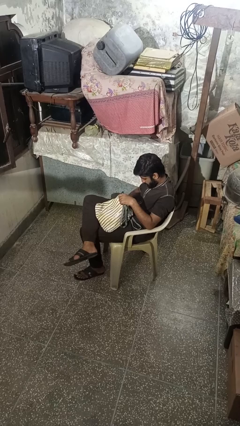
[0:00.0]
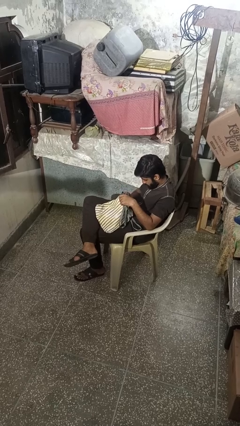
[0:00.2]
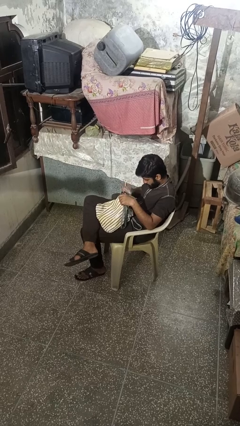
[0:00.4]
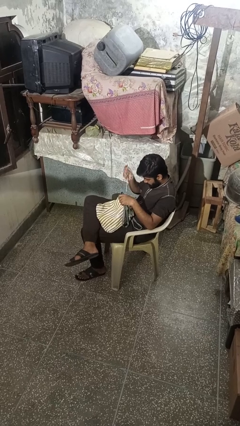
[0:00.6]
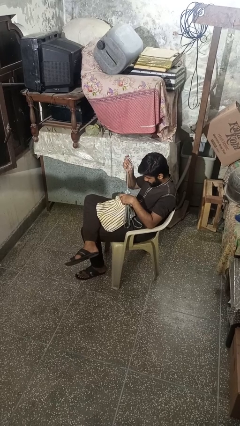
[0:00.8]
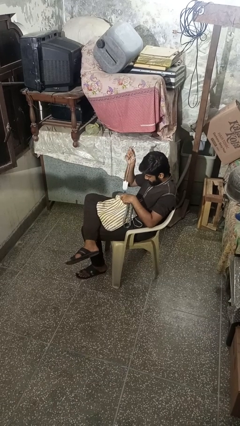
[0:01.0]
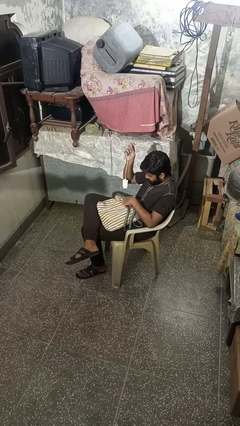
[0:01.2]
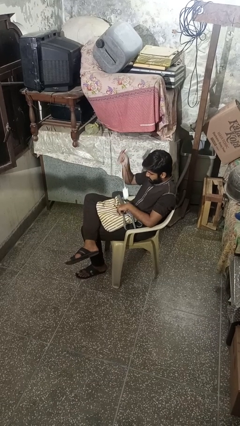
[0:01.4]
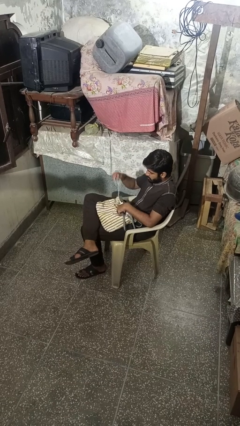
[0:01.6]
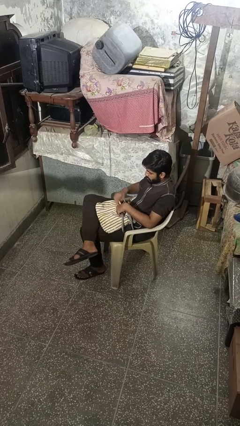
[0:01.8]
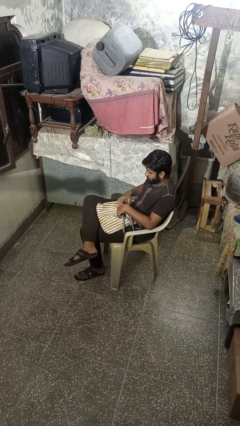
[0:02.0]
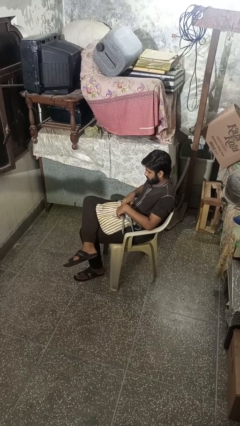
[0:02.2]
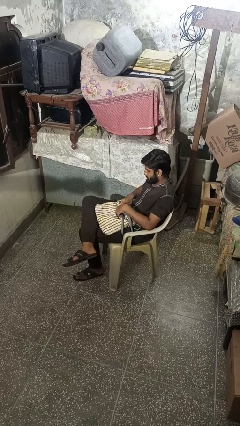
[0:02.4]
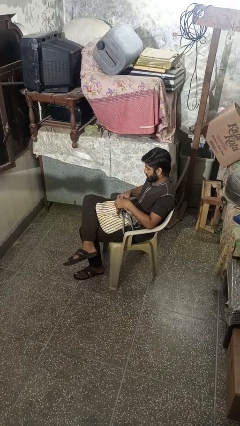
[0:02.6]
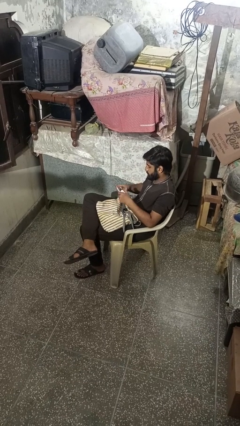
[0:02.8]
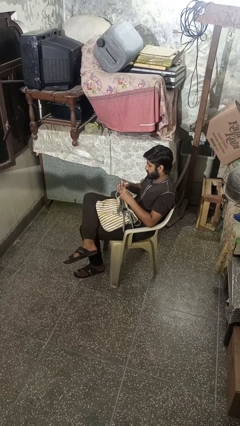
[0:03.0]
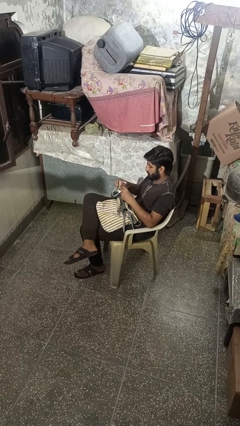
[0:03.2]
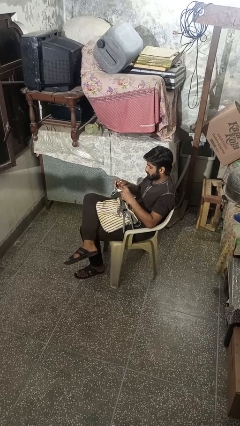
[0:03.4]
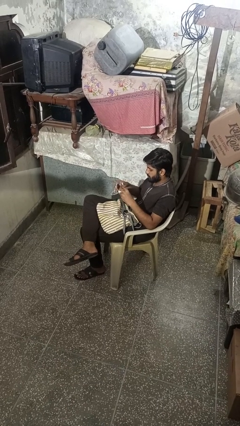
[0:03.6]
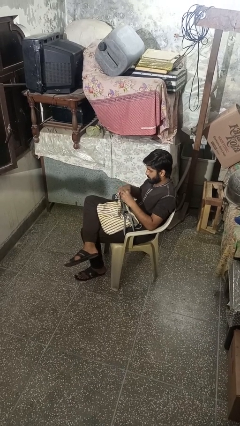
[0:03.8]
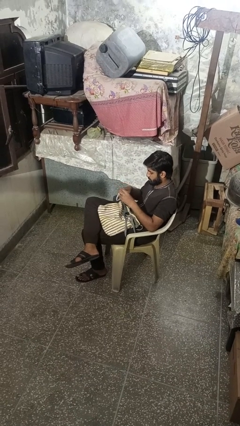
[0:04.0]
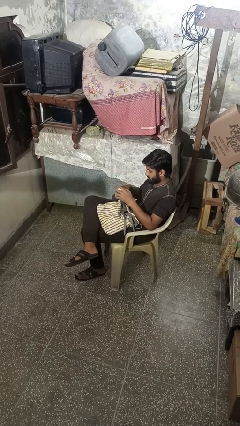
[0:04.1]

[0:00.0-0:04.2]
person takes object from purse

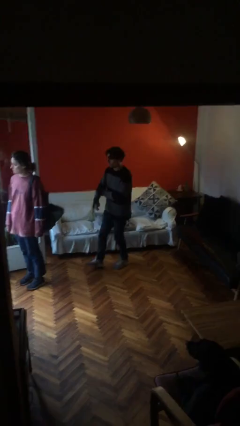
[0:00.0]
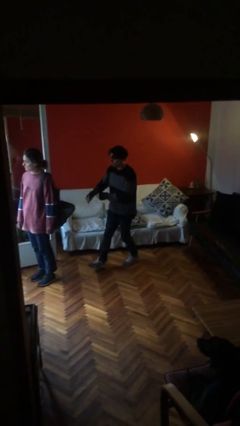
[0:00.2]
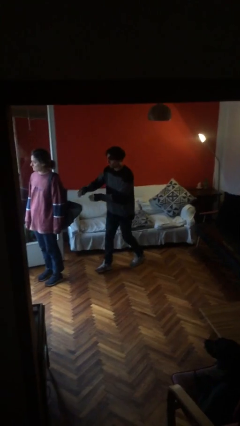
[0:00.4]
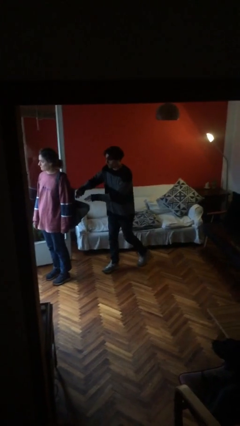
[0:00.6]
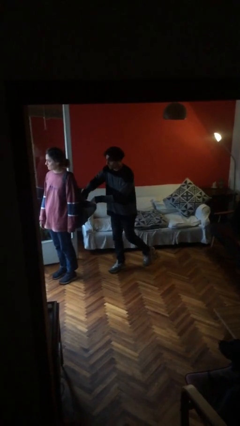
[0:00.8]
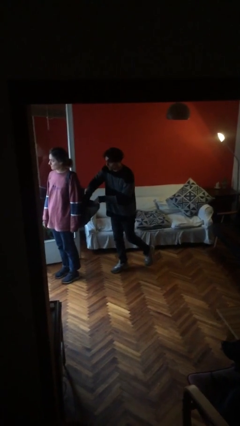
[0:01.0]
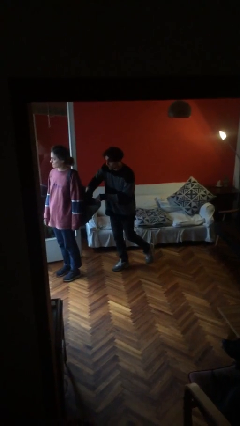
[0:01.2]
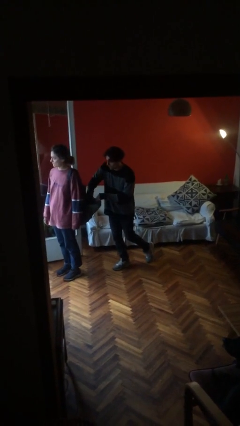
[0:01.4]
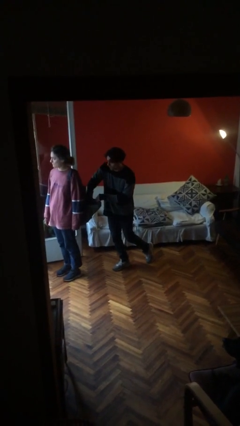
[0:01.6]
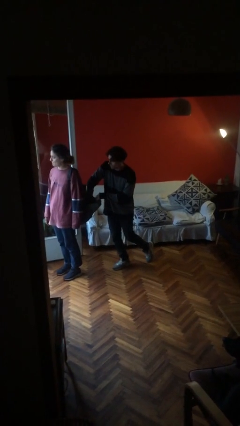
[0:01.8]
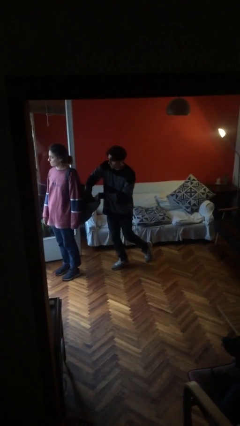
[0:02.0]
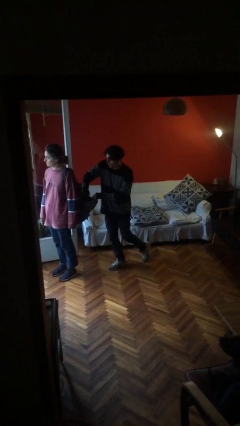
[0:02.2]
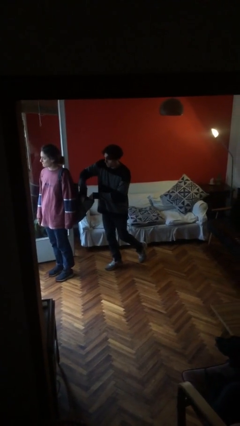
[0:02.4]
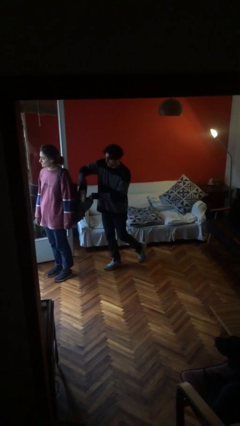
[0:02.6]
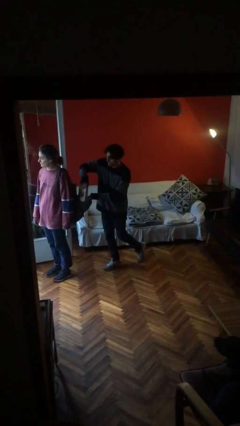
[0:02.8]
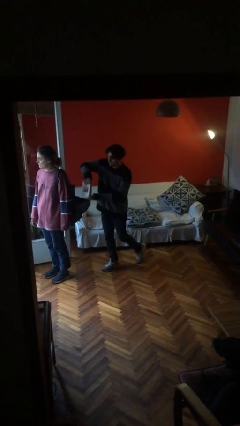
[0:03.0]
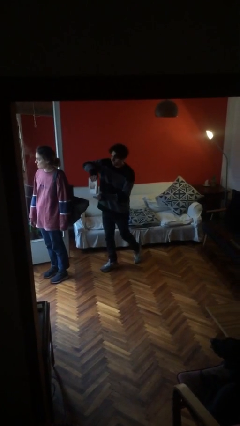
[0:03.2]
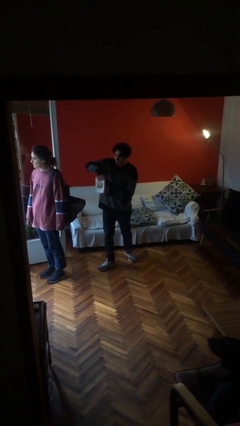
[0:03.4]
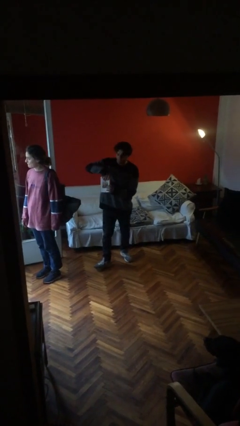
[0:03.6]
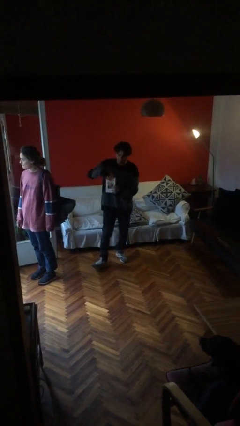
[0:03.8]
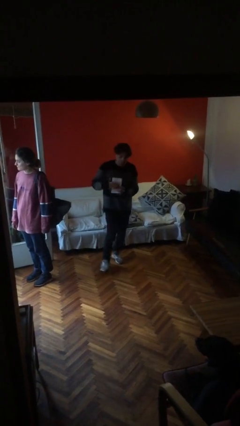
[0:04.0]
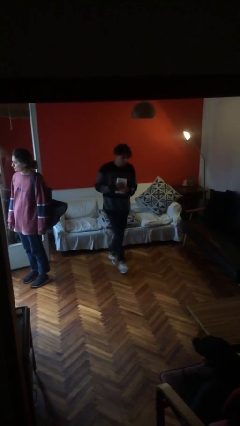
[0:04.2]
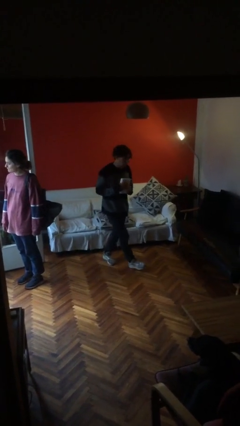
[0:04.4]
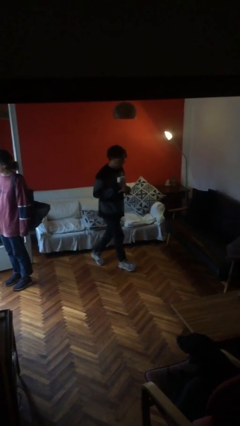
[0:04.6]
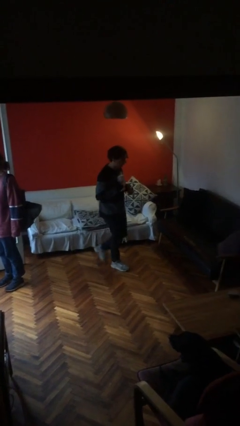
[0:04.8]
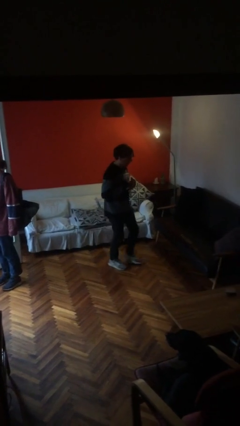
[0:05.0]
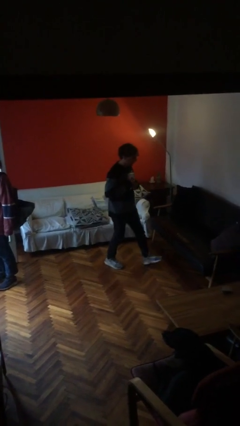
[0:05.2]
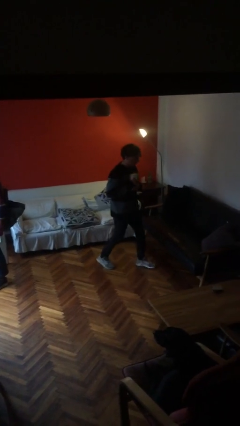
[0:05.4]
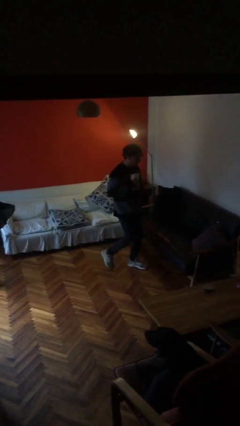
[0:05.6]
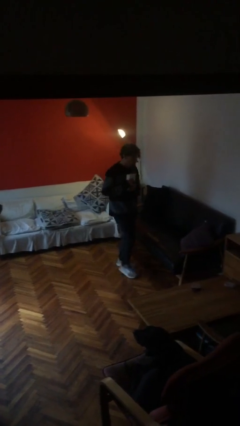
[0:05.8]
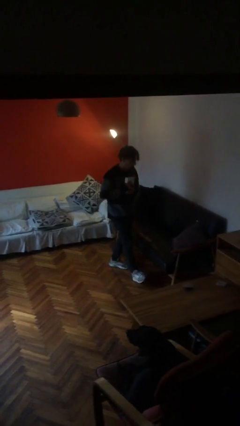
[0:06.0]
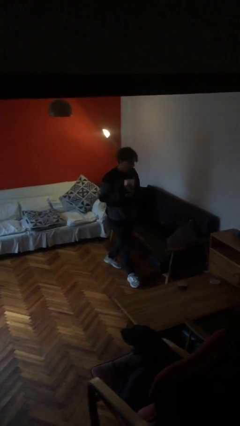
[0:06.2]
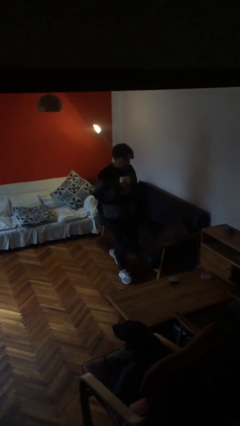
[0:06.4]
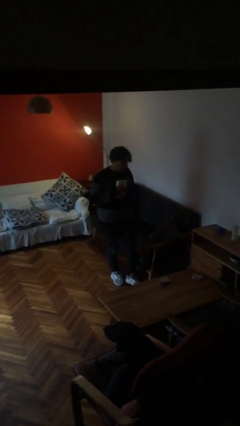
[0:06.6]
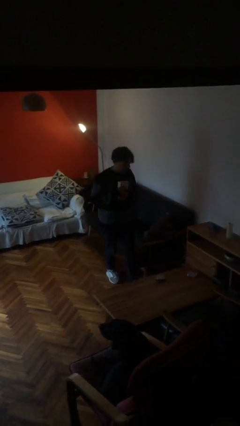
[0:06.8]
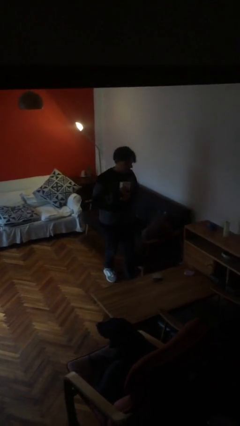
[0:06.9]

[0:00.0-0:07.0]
person steals object from person

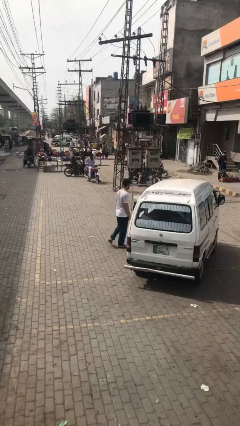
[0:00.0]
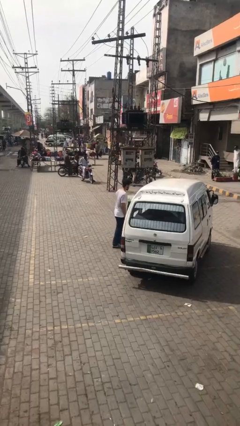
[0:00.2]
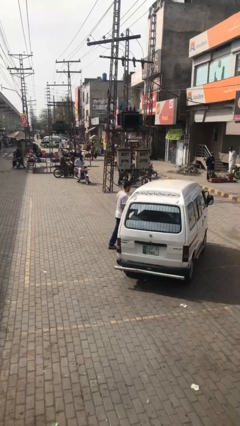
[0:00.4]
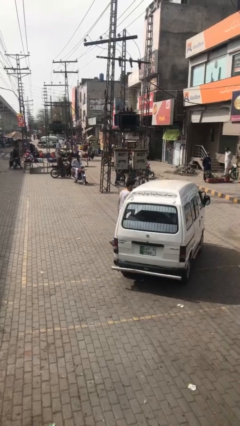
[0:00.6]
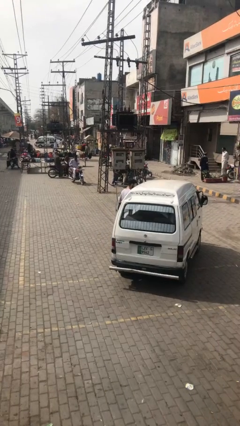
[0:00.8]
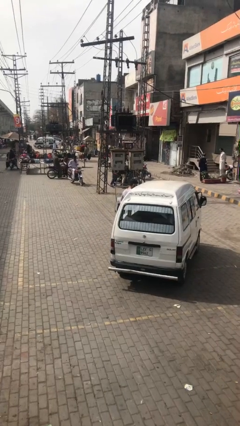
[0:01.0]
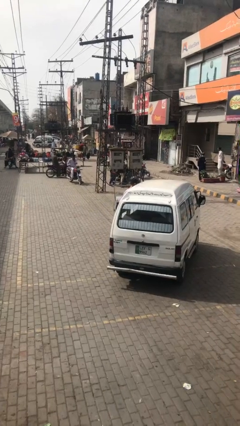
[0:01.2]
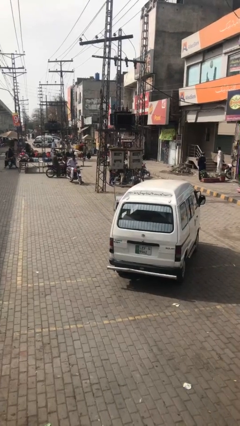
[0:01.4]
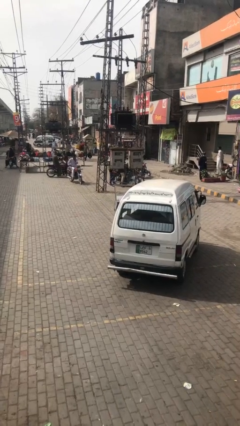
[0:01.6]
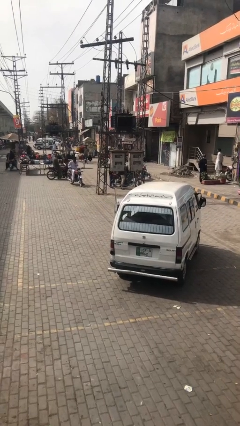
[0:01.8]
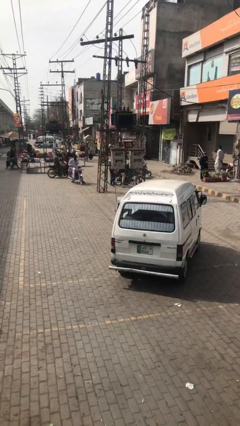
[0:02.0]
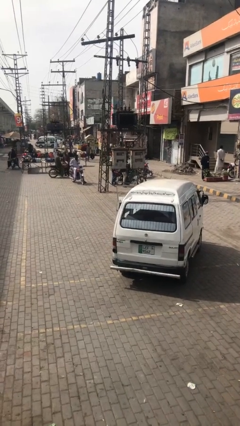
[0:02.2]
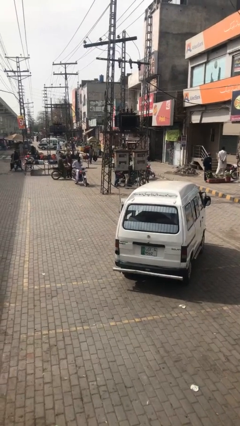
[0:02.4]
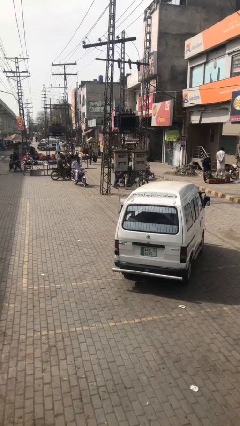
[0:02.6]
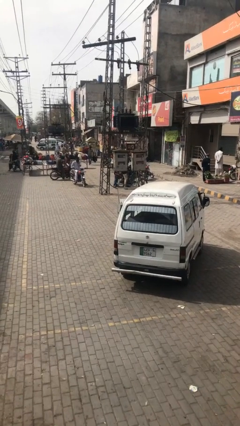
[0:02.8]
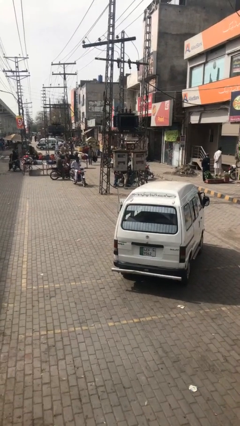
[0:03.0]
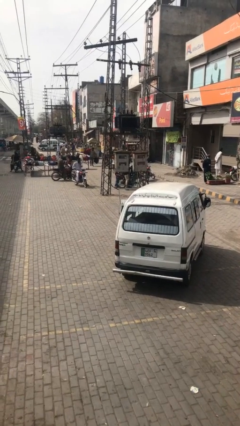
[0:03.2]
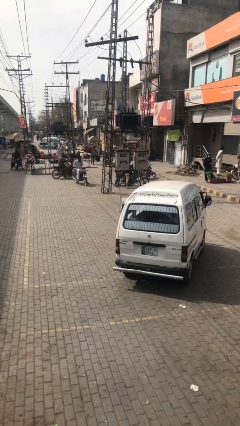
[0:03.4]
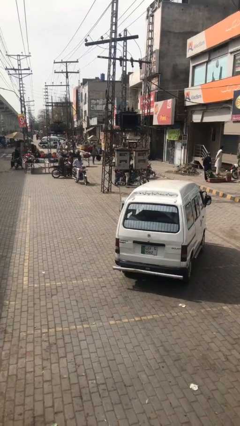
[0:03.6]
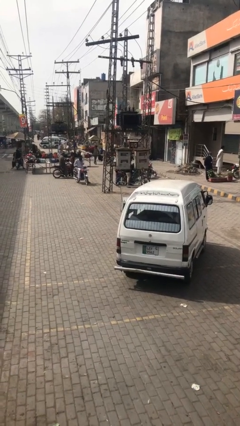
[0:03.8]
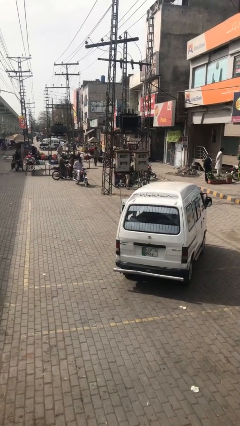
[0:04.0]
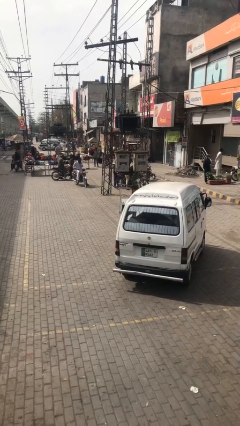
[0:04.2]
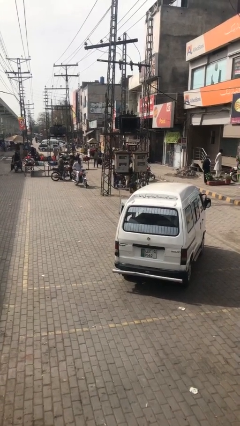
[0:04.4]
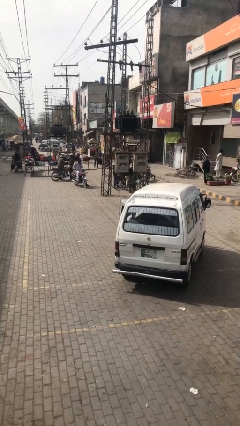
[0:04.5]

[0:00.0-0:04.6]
person enters car

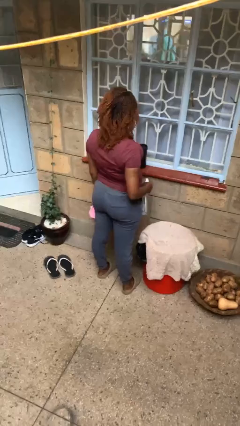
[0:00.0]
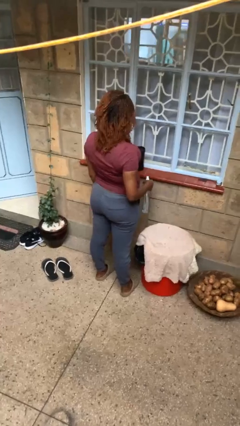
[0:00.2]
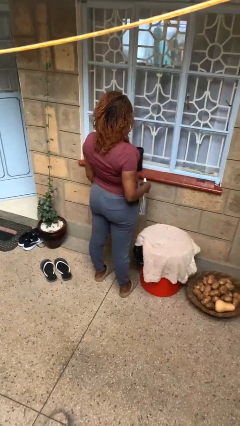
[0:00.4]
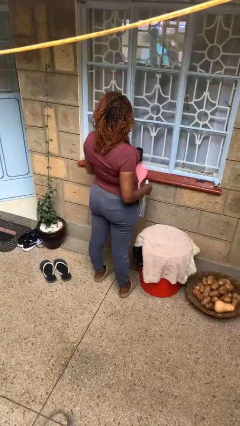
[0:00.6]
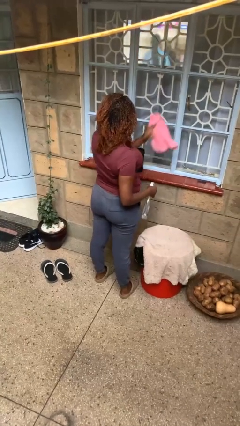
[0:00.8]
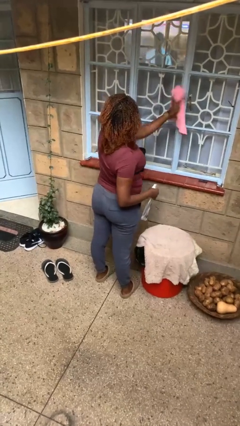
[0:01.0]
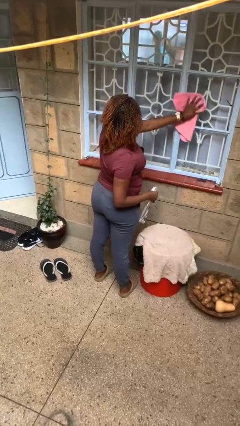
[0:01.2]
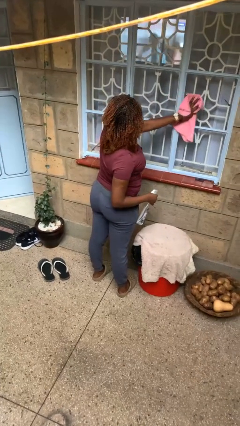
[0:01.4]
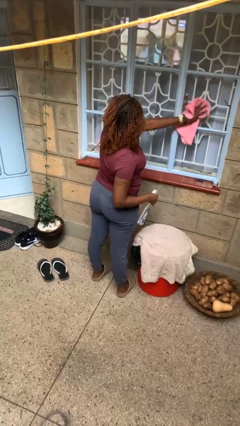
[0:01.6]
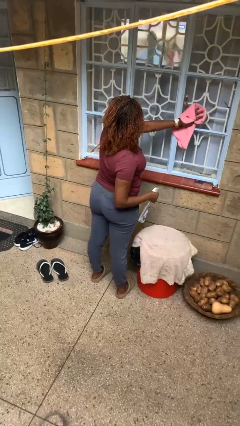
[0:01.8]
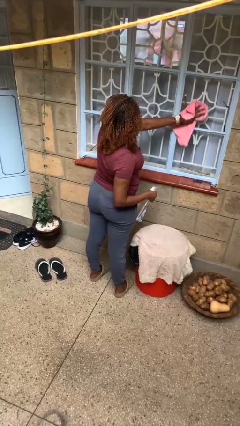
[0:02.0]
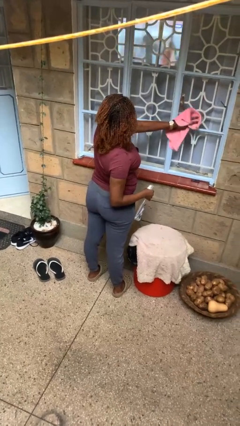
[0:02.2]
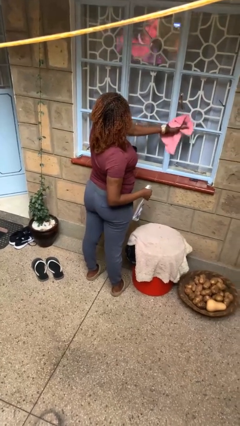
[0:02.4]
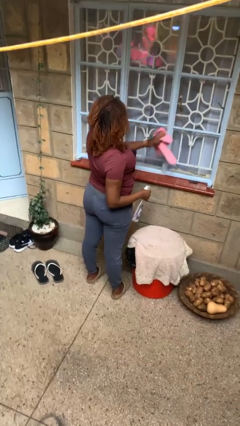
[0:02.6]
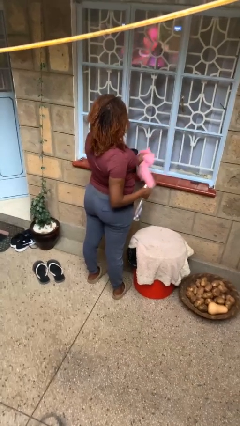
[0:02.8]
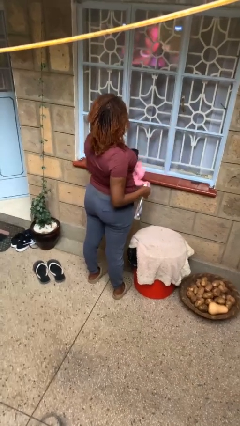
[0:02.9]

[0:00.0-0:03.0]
person washes window
